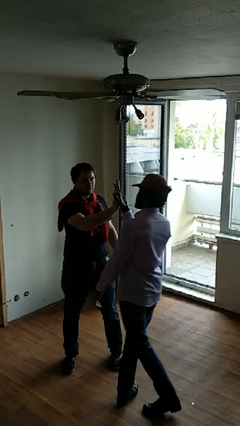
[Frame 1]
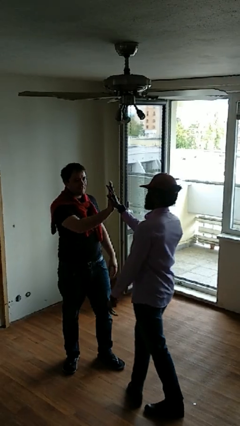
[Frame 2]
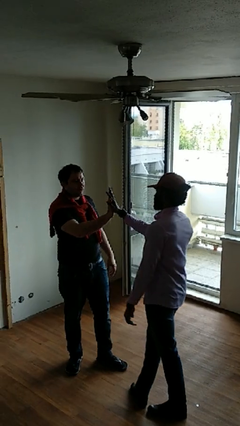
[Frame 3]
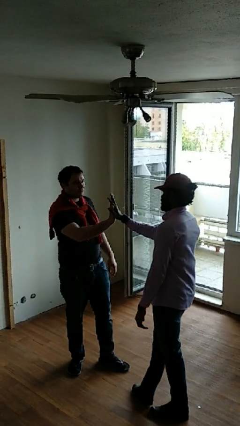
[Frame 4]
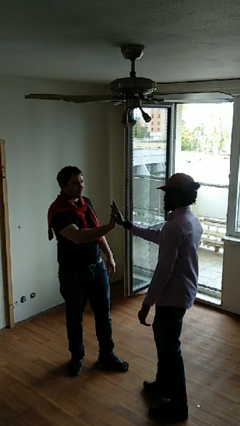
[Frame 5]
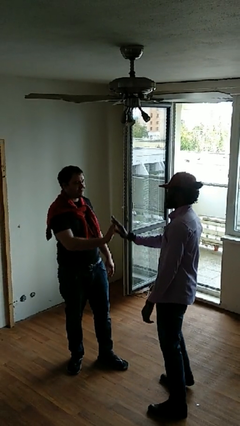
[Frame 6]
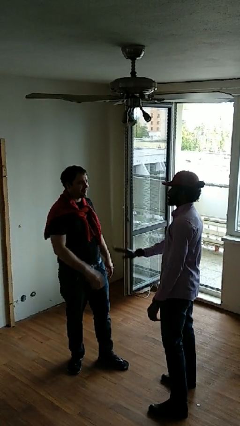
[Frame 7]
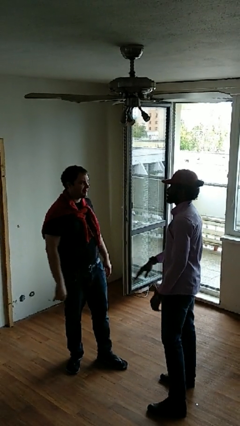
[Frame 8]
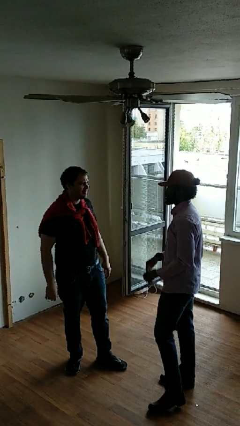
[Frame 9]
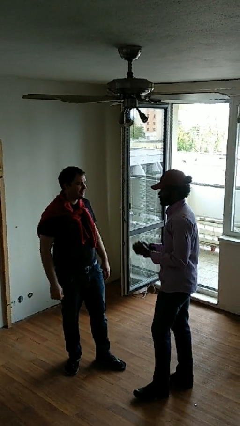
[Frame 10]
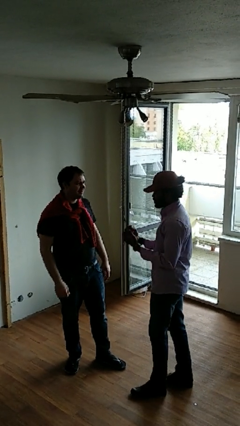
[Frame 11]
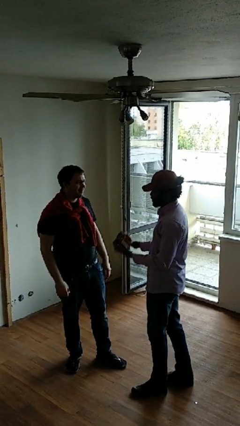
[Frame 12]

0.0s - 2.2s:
person highfives hand

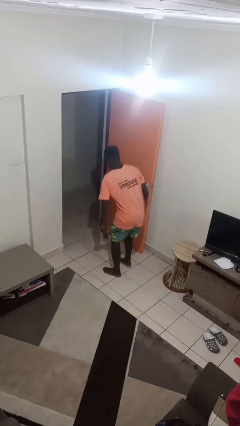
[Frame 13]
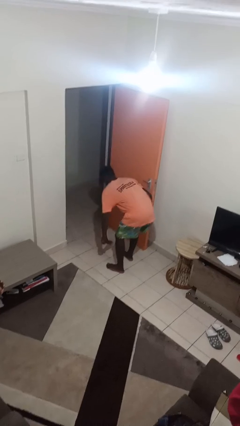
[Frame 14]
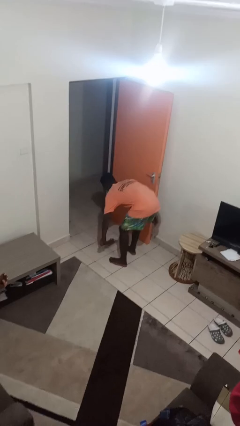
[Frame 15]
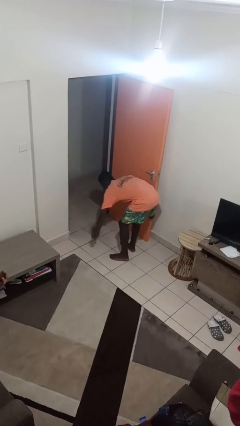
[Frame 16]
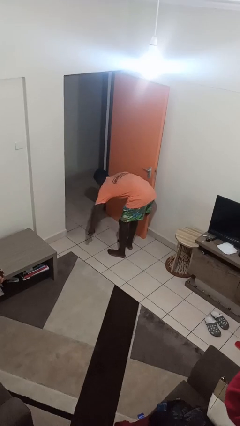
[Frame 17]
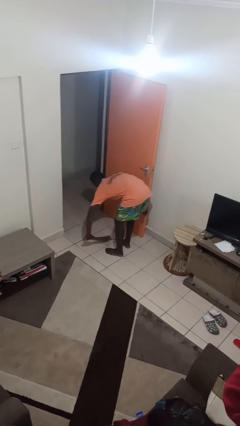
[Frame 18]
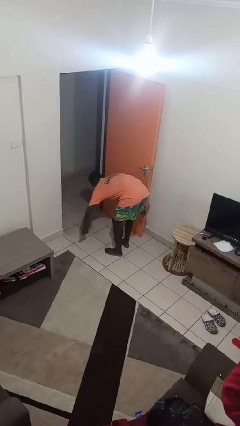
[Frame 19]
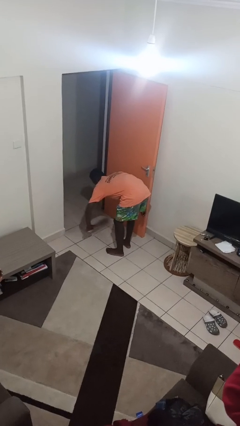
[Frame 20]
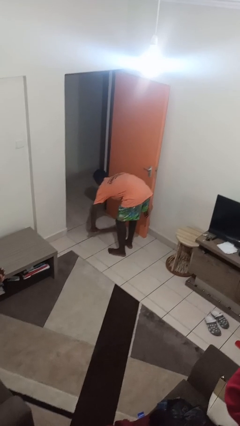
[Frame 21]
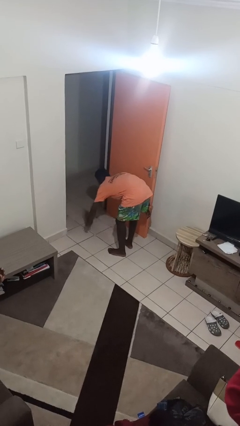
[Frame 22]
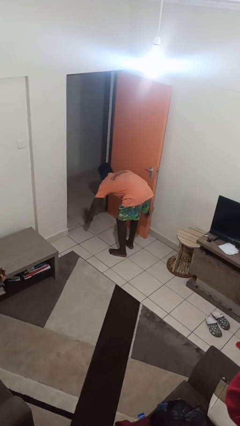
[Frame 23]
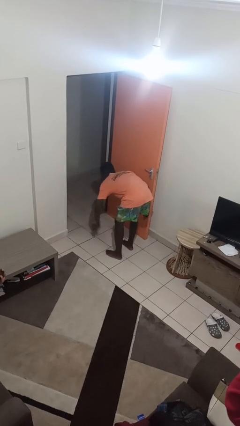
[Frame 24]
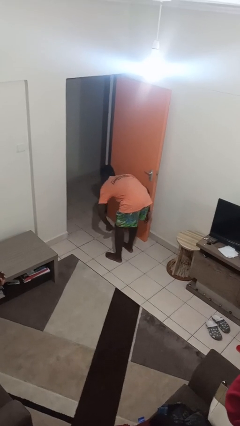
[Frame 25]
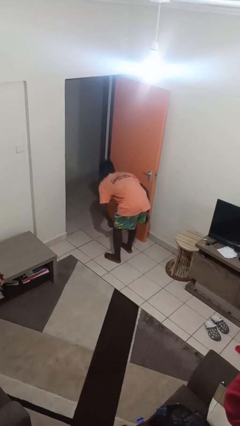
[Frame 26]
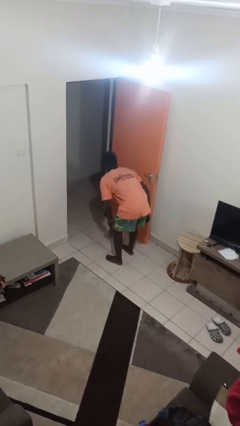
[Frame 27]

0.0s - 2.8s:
person sweeps floor

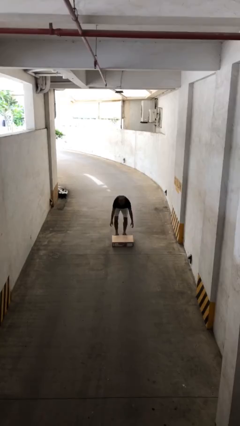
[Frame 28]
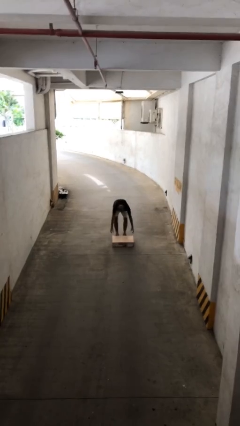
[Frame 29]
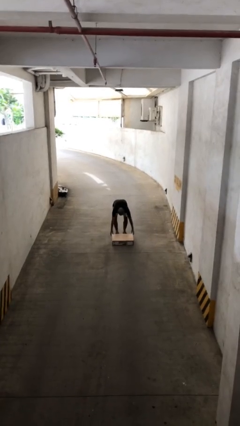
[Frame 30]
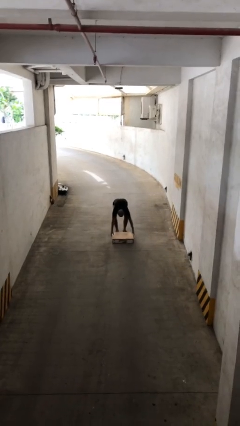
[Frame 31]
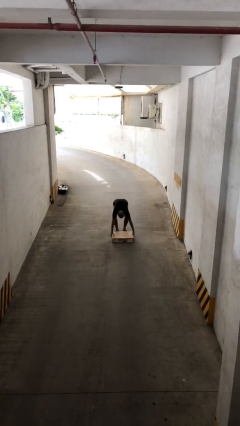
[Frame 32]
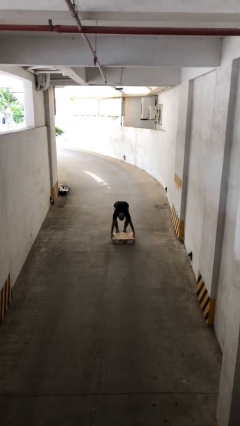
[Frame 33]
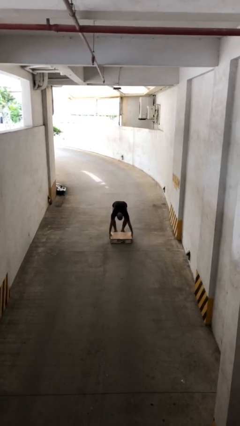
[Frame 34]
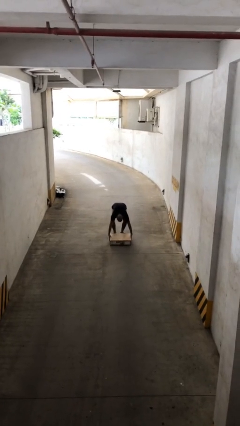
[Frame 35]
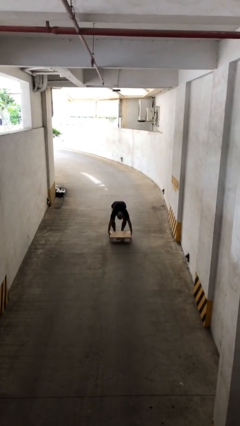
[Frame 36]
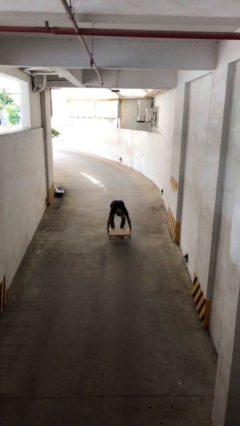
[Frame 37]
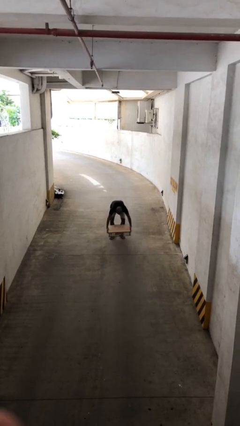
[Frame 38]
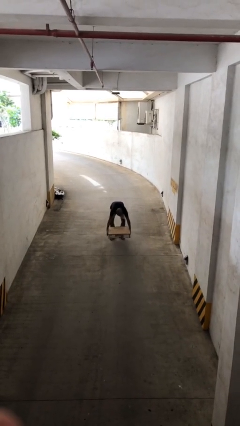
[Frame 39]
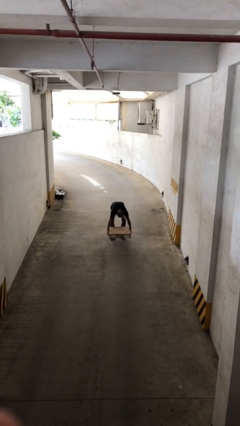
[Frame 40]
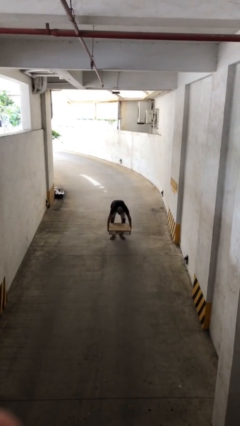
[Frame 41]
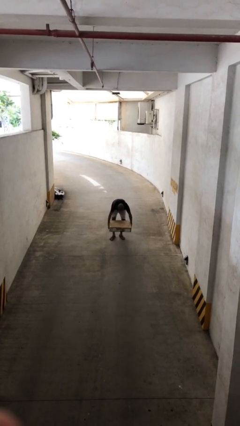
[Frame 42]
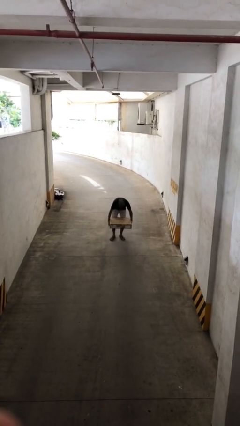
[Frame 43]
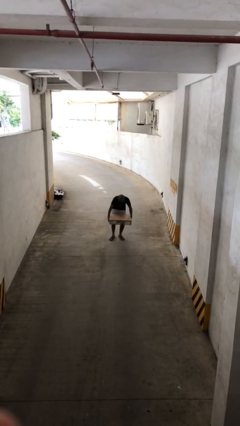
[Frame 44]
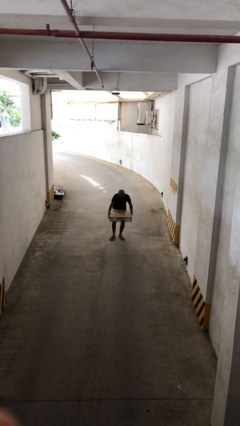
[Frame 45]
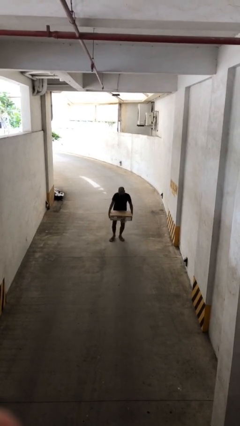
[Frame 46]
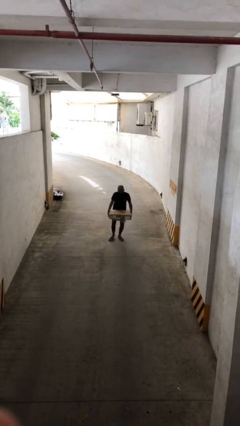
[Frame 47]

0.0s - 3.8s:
person picks up object from floor

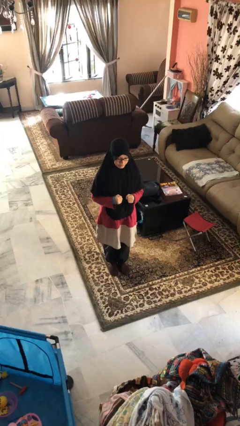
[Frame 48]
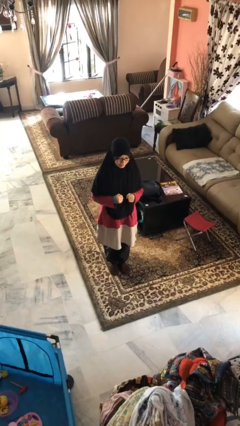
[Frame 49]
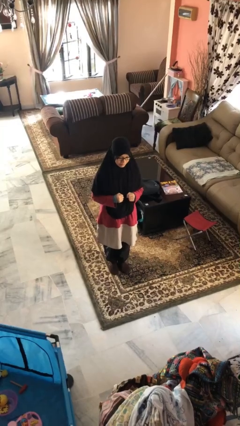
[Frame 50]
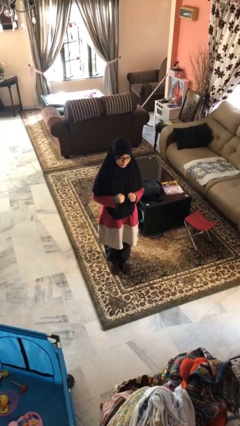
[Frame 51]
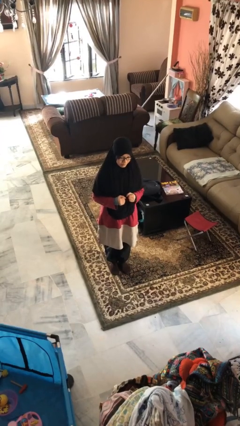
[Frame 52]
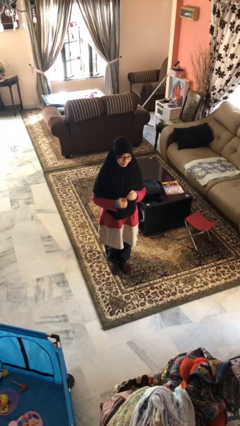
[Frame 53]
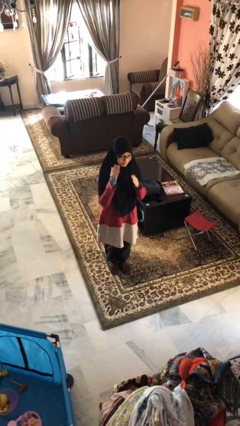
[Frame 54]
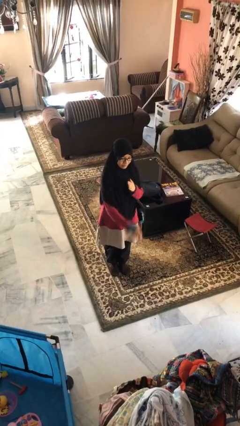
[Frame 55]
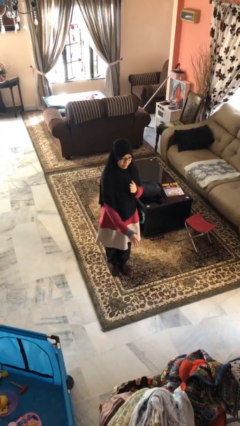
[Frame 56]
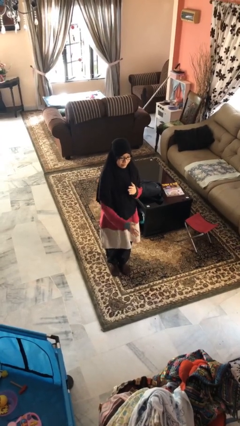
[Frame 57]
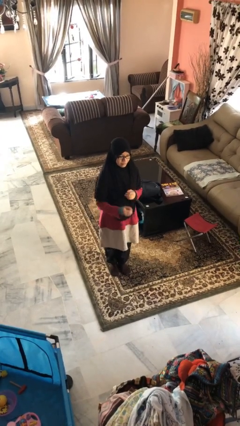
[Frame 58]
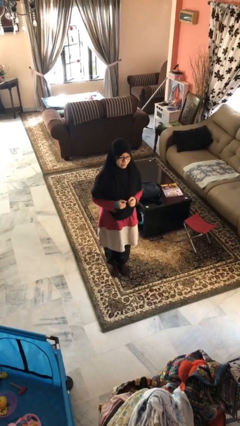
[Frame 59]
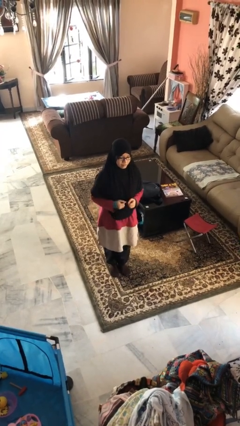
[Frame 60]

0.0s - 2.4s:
person karate chop

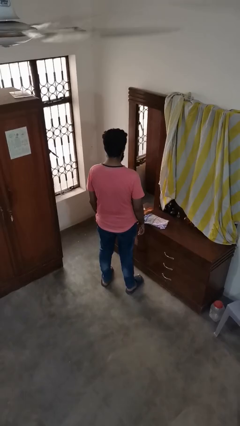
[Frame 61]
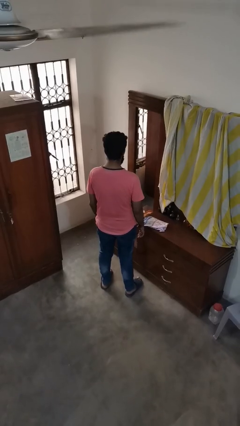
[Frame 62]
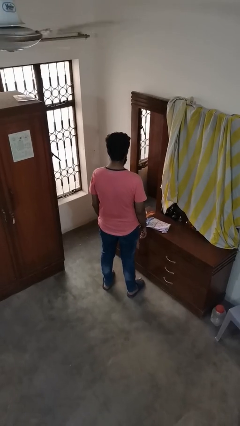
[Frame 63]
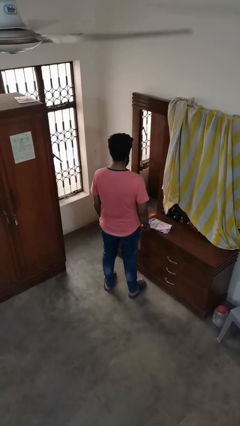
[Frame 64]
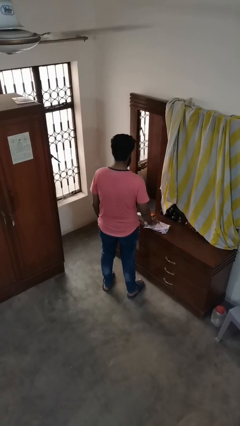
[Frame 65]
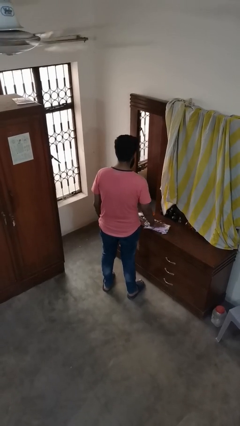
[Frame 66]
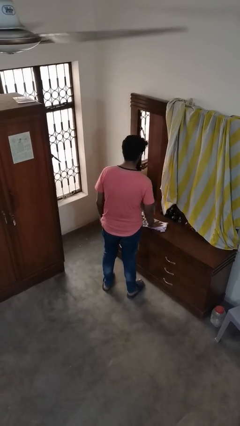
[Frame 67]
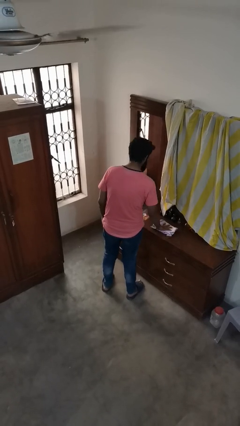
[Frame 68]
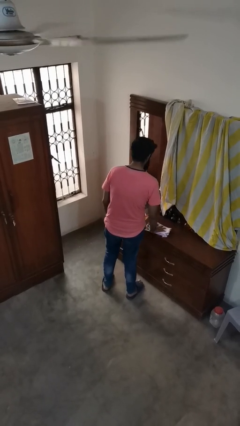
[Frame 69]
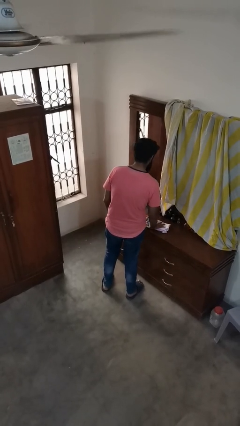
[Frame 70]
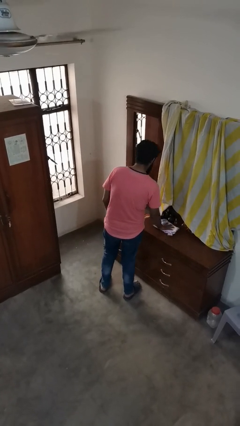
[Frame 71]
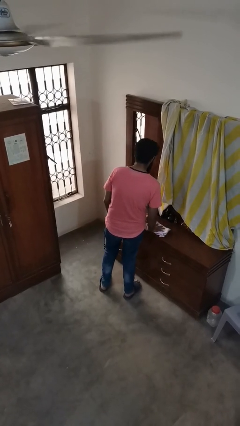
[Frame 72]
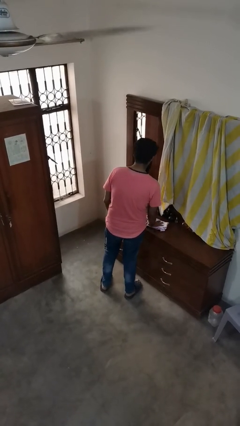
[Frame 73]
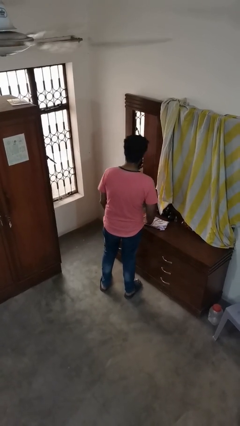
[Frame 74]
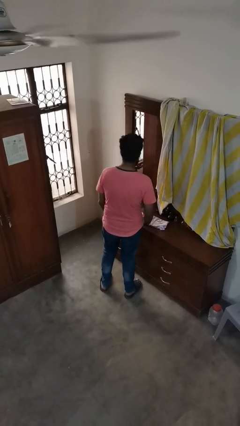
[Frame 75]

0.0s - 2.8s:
person cleans table with rag

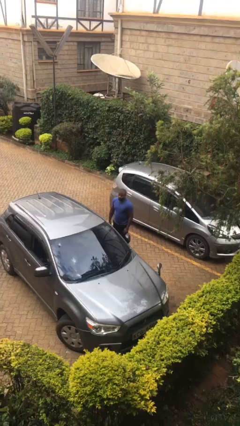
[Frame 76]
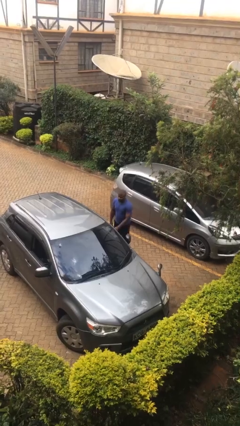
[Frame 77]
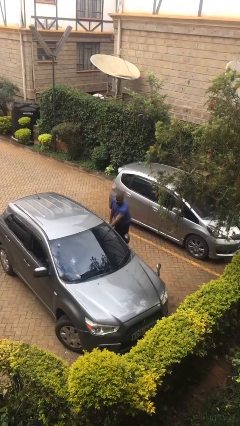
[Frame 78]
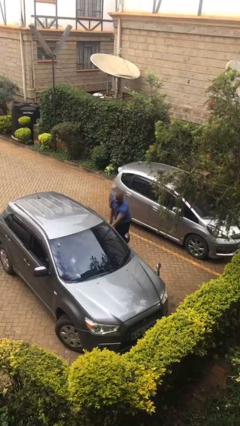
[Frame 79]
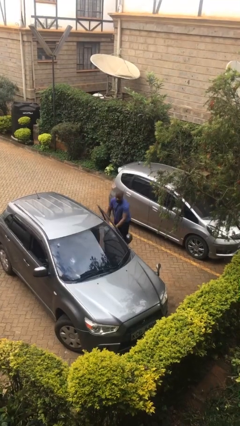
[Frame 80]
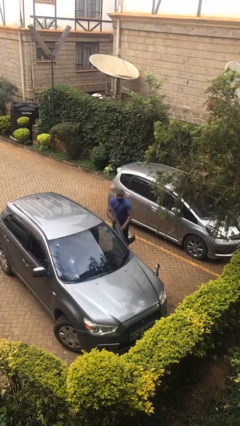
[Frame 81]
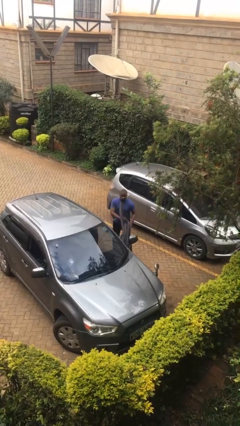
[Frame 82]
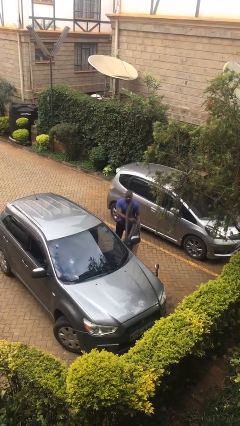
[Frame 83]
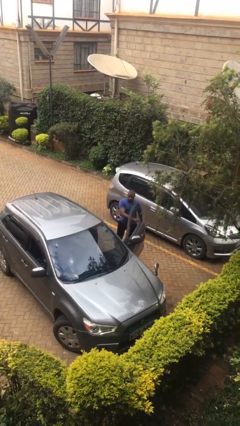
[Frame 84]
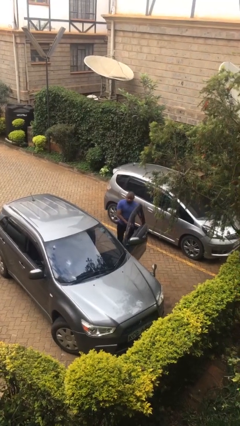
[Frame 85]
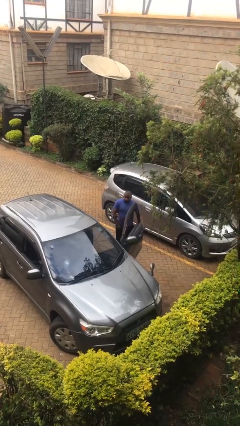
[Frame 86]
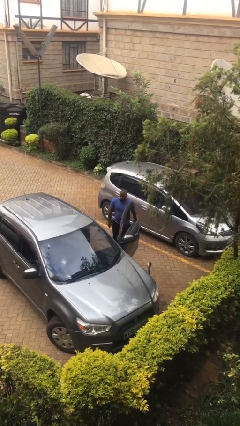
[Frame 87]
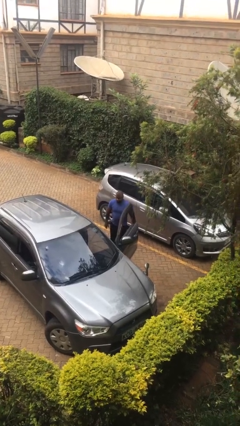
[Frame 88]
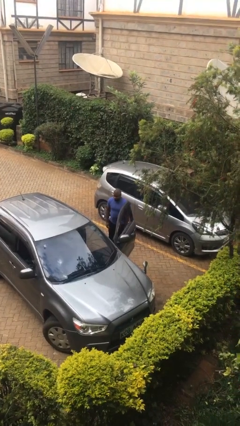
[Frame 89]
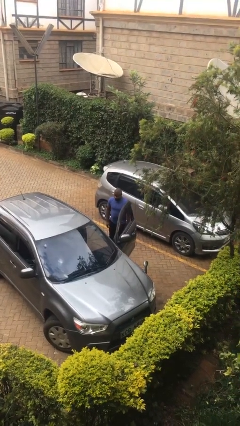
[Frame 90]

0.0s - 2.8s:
person opens car door

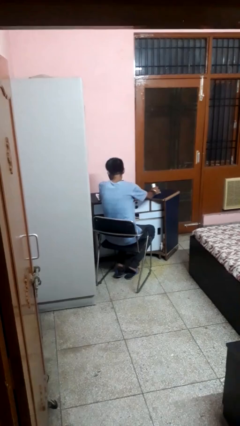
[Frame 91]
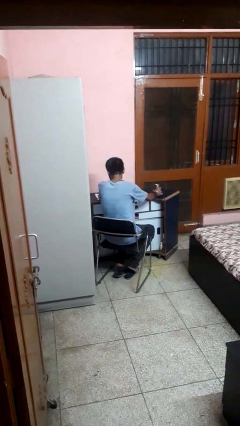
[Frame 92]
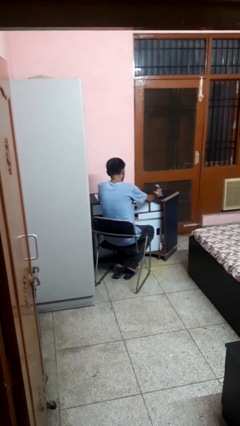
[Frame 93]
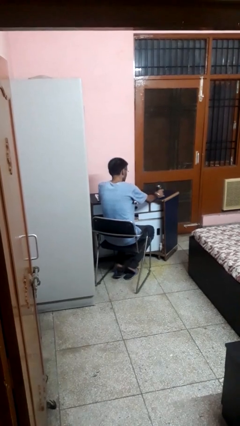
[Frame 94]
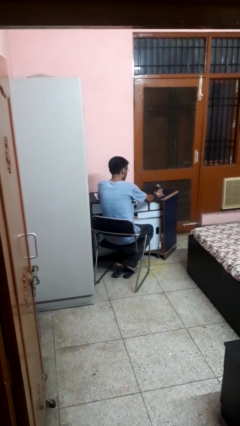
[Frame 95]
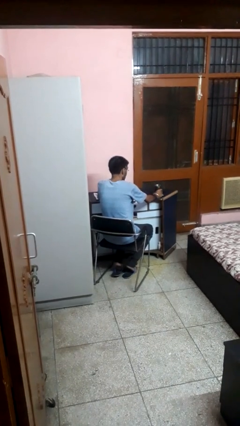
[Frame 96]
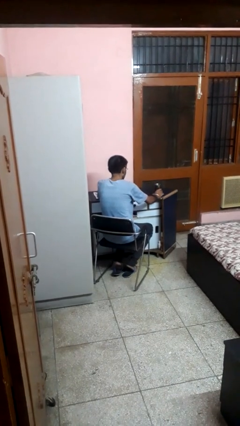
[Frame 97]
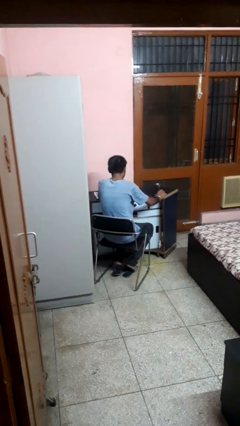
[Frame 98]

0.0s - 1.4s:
person sets upright glass
